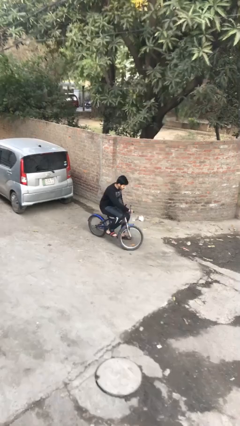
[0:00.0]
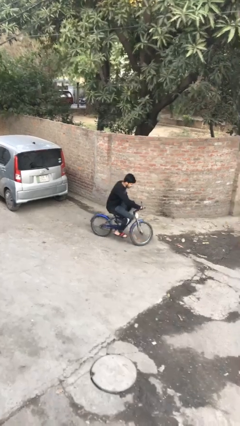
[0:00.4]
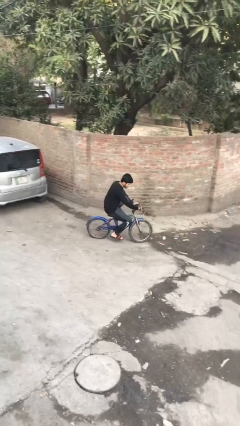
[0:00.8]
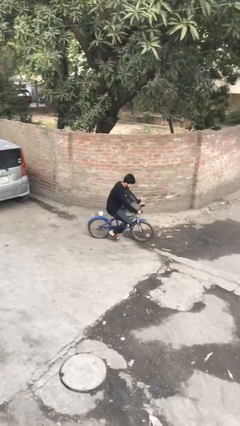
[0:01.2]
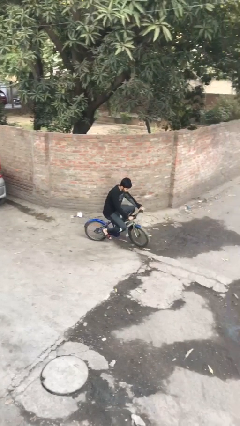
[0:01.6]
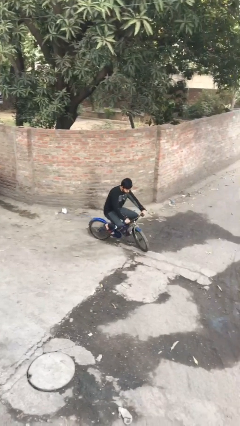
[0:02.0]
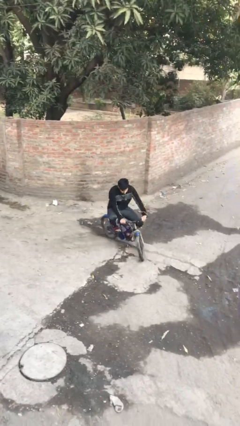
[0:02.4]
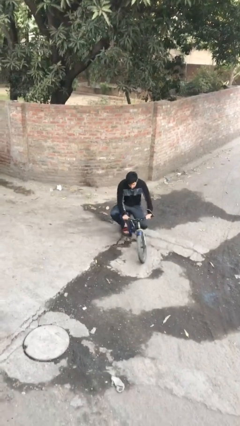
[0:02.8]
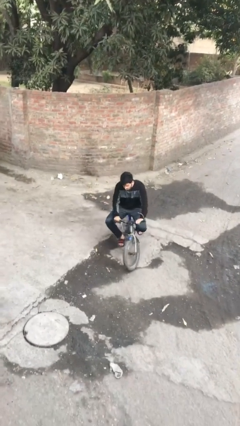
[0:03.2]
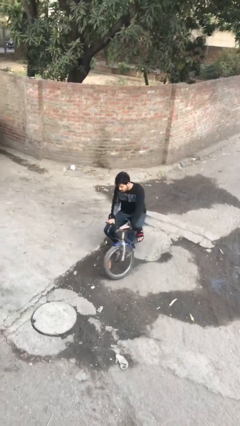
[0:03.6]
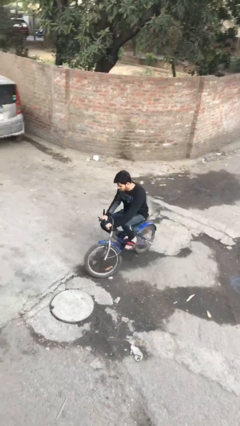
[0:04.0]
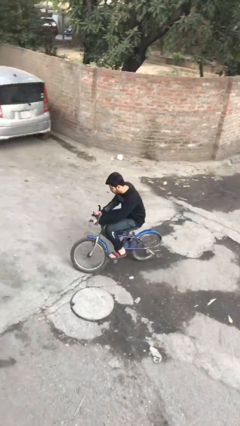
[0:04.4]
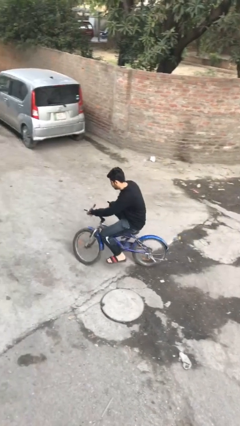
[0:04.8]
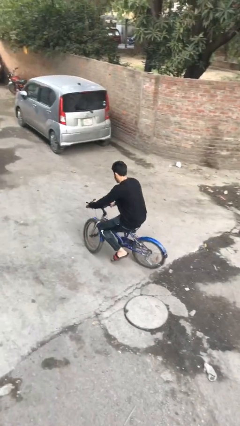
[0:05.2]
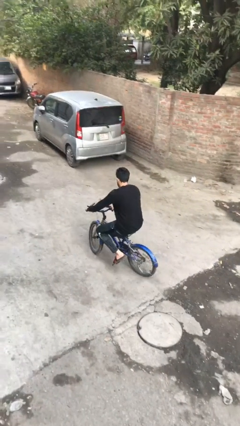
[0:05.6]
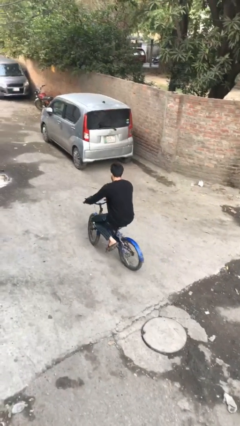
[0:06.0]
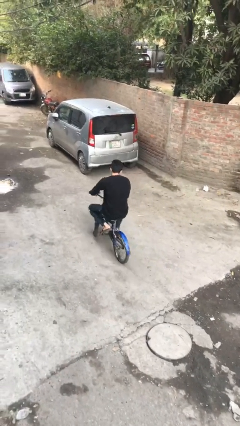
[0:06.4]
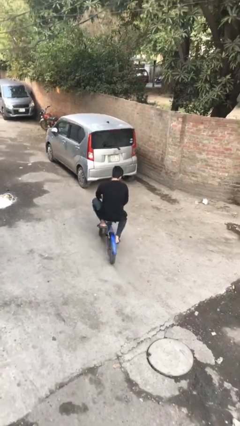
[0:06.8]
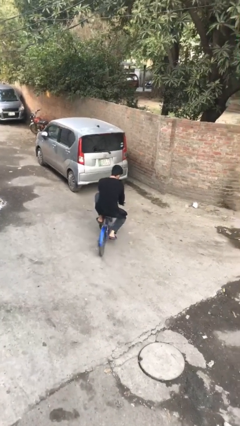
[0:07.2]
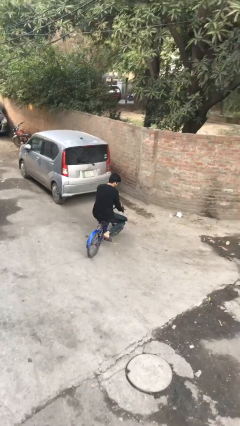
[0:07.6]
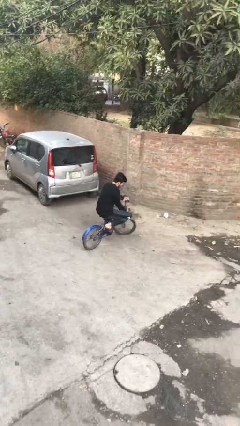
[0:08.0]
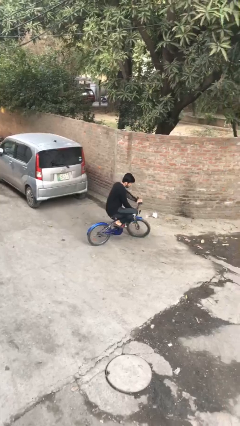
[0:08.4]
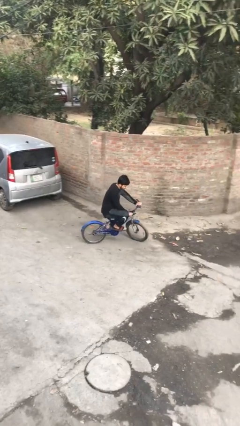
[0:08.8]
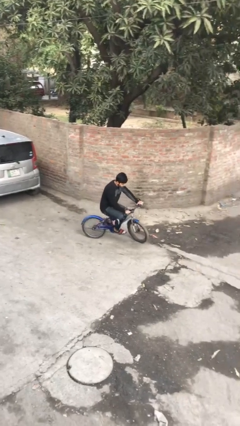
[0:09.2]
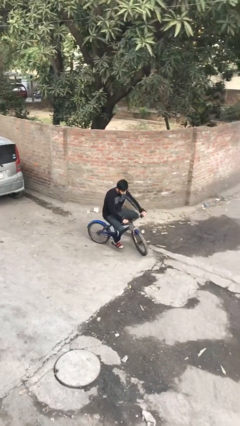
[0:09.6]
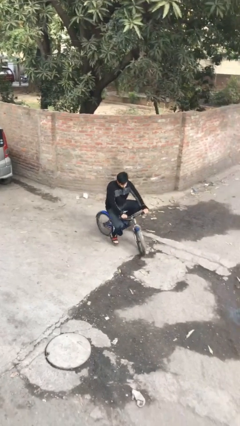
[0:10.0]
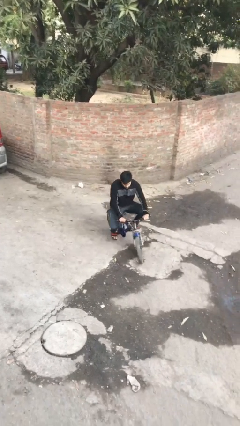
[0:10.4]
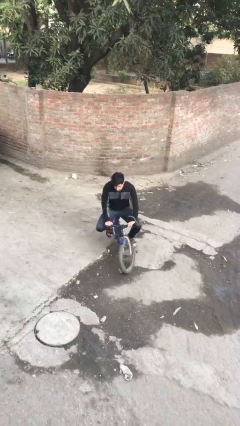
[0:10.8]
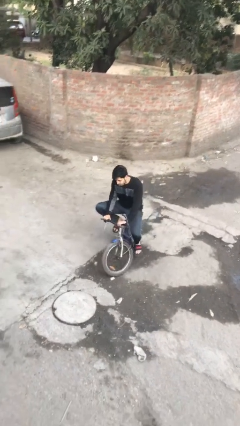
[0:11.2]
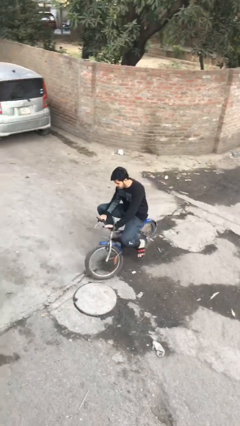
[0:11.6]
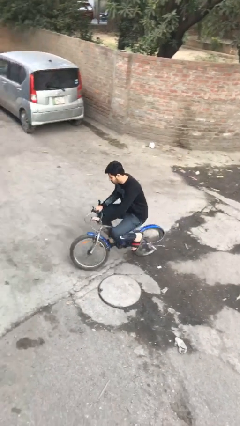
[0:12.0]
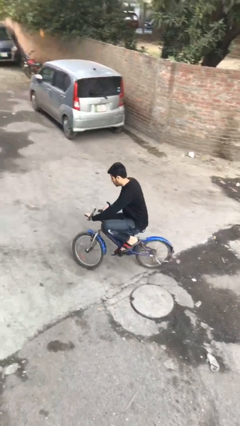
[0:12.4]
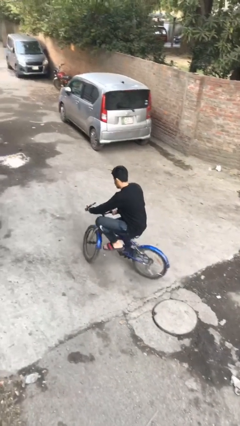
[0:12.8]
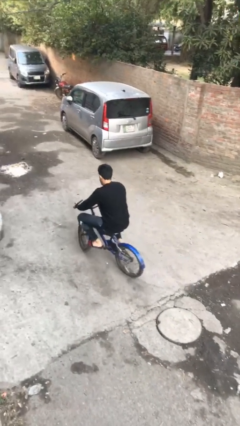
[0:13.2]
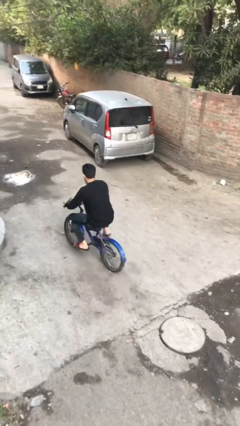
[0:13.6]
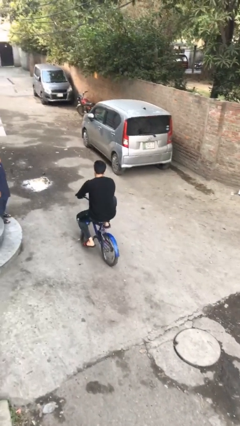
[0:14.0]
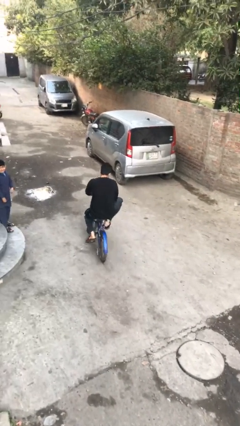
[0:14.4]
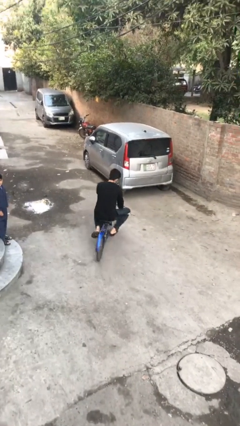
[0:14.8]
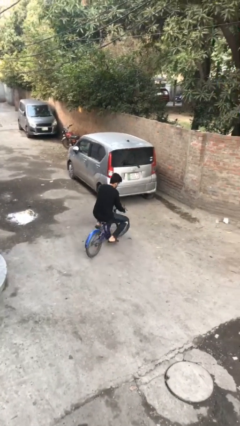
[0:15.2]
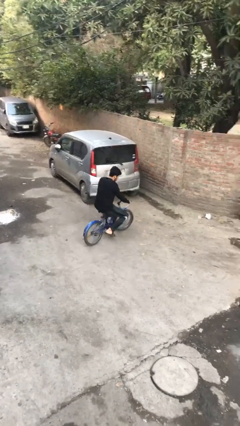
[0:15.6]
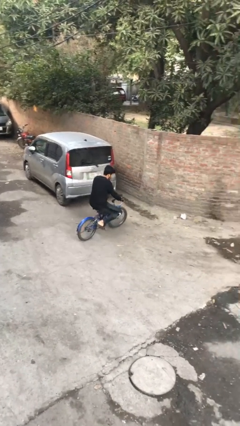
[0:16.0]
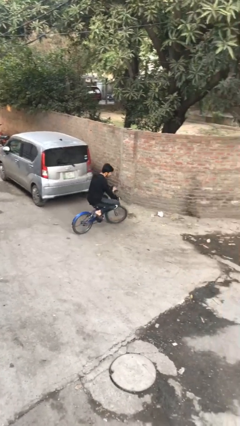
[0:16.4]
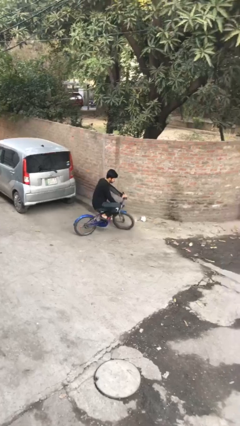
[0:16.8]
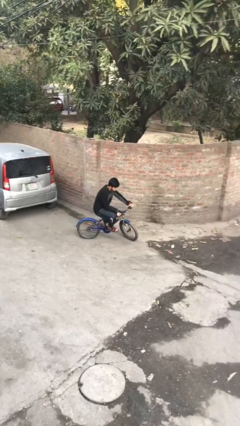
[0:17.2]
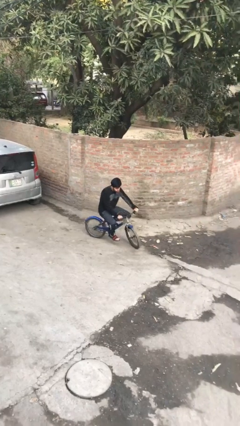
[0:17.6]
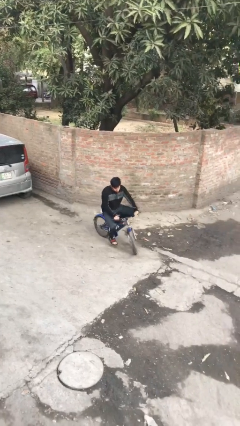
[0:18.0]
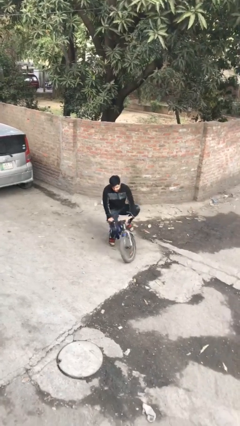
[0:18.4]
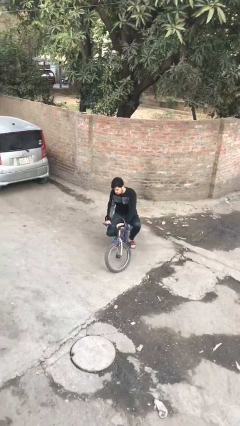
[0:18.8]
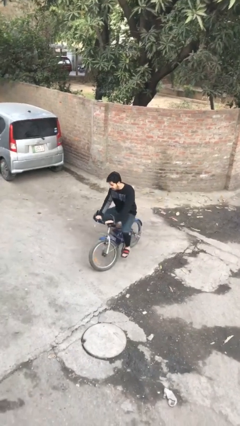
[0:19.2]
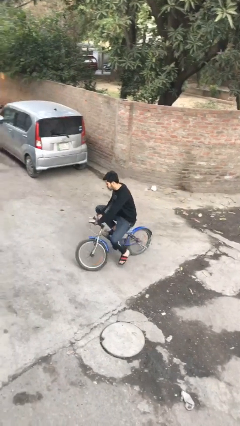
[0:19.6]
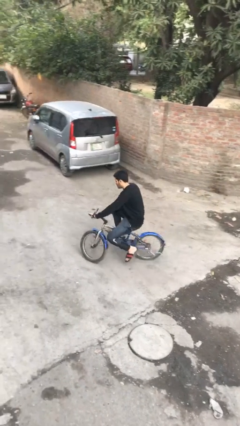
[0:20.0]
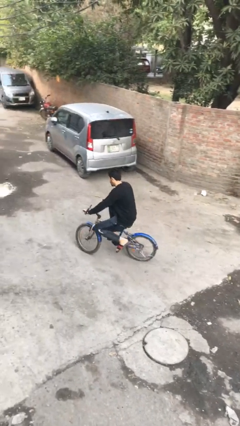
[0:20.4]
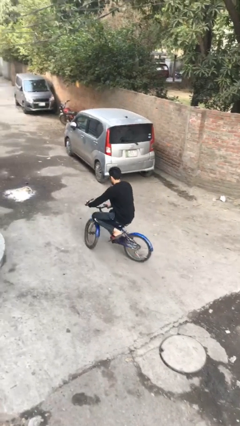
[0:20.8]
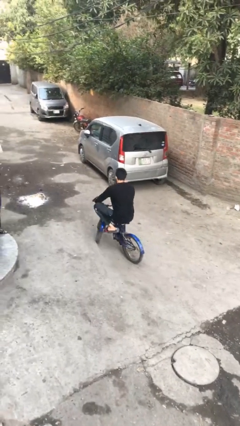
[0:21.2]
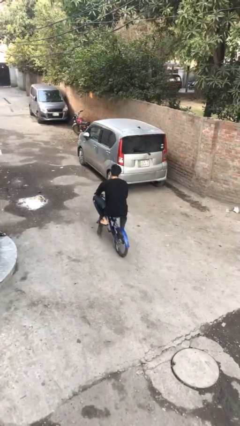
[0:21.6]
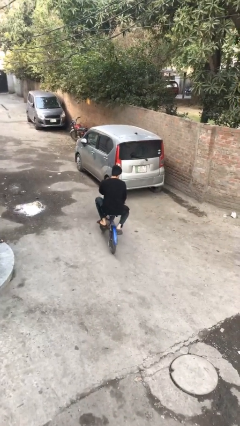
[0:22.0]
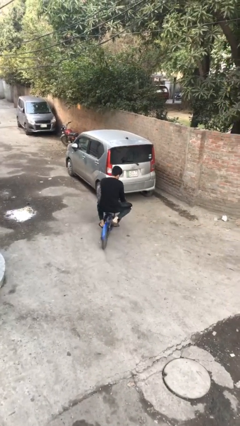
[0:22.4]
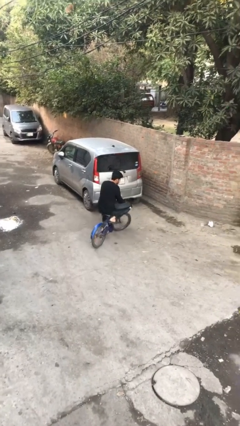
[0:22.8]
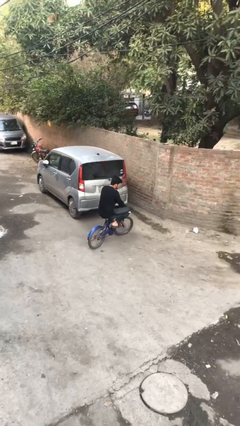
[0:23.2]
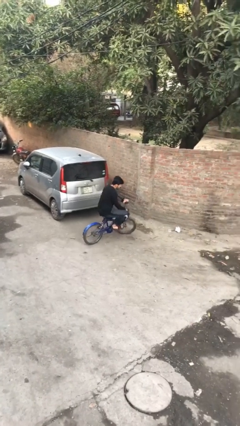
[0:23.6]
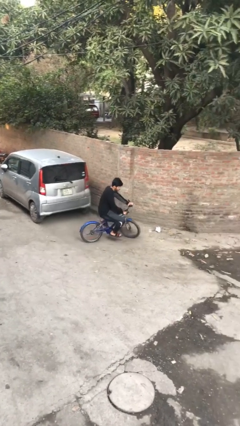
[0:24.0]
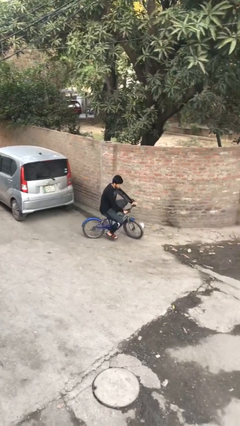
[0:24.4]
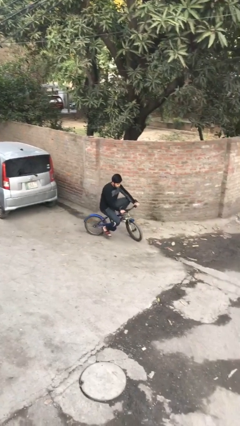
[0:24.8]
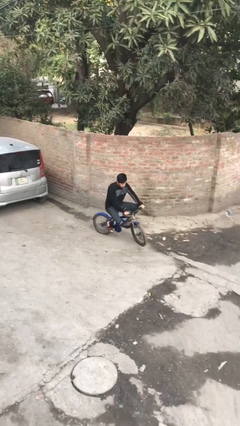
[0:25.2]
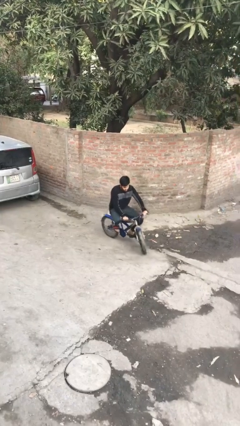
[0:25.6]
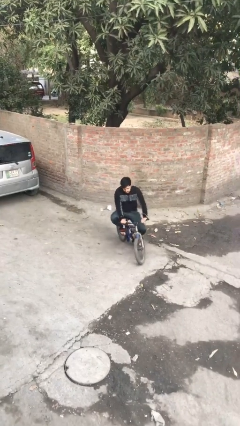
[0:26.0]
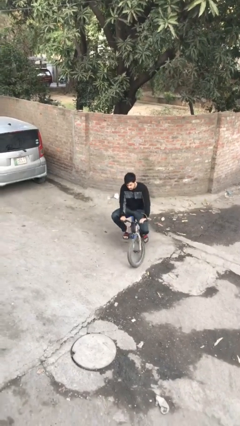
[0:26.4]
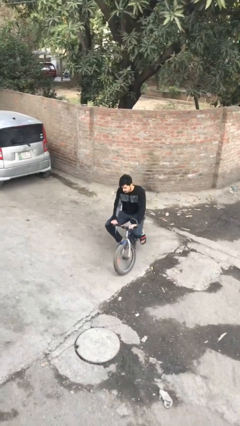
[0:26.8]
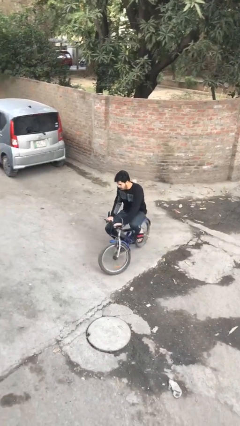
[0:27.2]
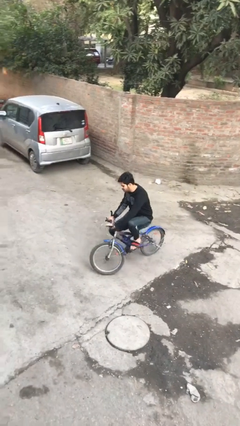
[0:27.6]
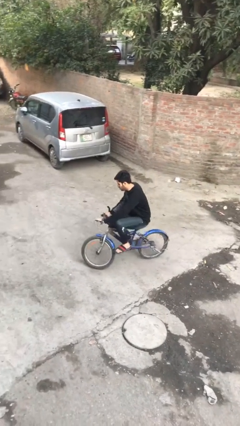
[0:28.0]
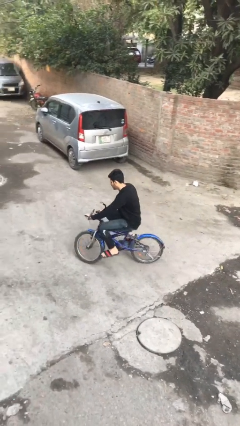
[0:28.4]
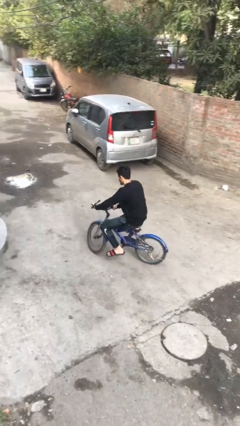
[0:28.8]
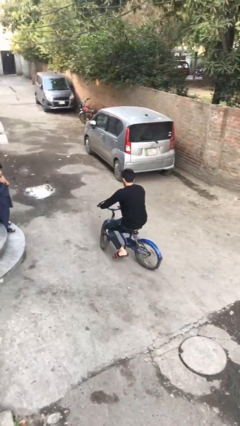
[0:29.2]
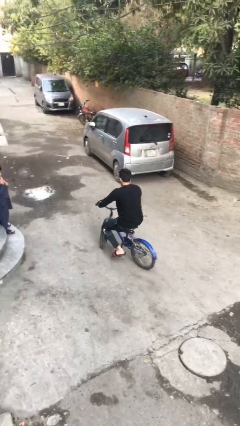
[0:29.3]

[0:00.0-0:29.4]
person rides bicycle

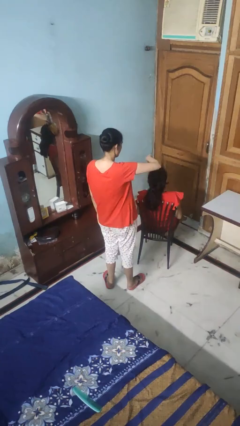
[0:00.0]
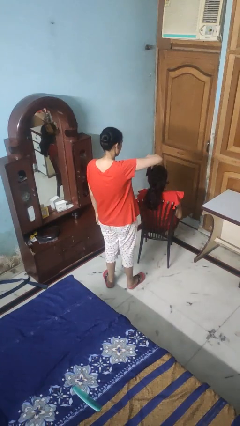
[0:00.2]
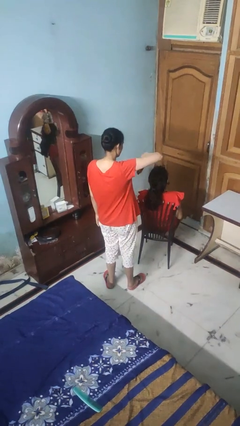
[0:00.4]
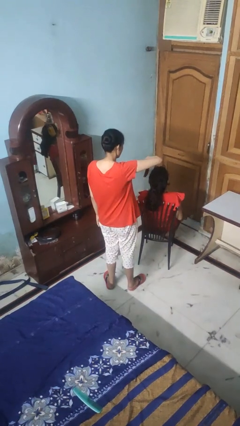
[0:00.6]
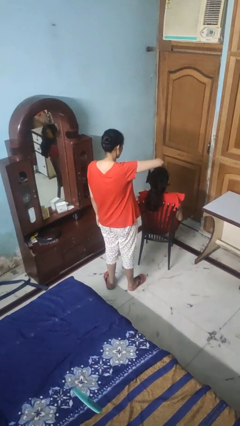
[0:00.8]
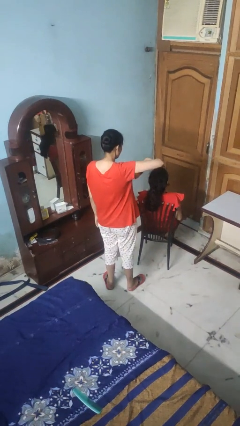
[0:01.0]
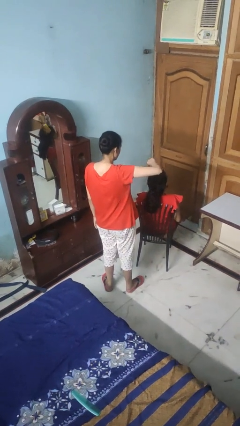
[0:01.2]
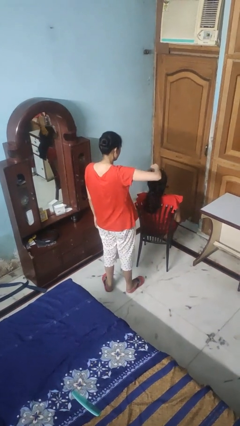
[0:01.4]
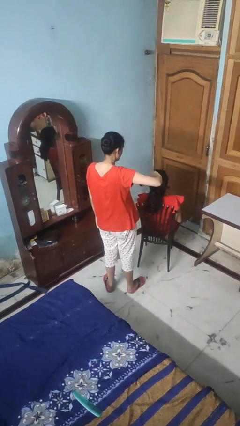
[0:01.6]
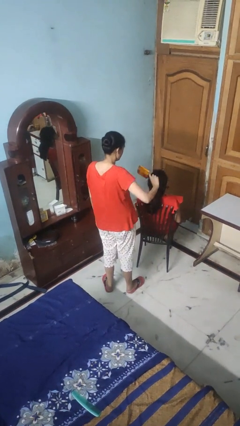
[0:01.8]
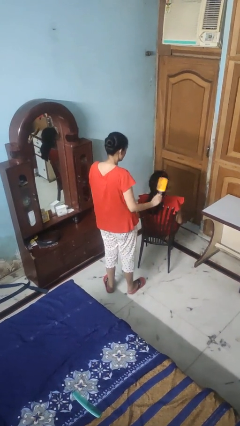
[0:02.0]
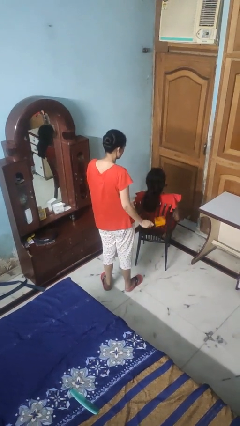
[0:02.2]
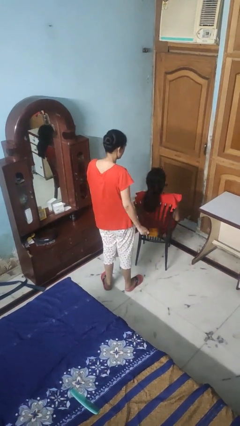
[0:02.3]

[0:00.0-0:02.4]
person brushes hair of person

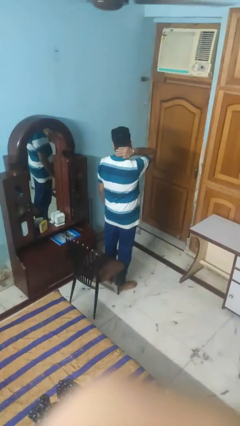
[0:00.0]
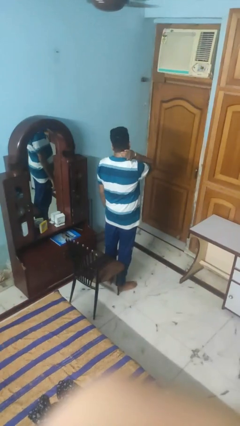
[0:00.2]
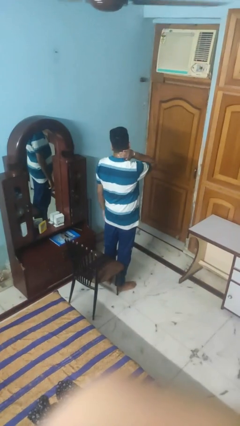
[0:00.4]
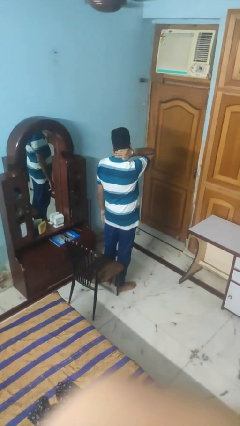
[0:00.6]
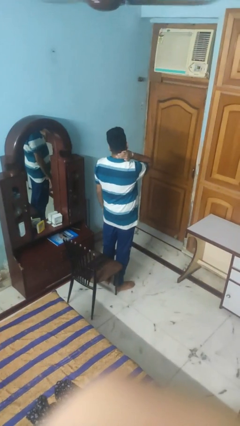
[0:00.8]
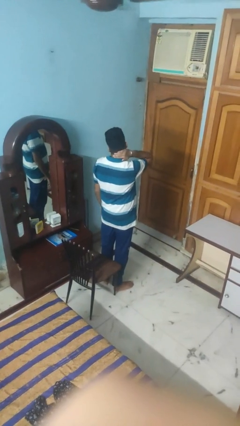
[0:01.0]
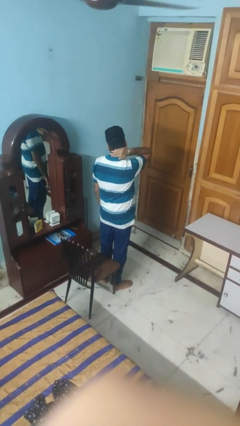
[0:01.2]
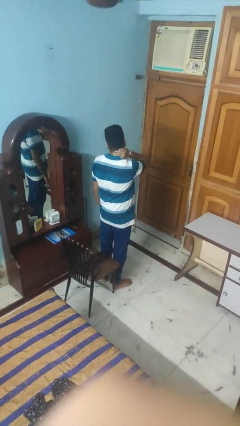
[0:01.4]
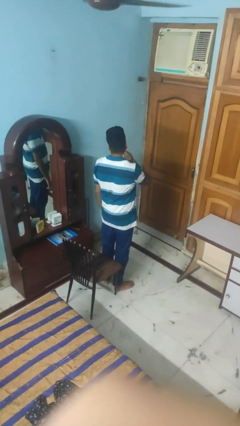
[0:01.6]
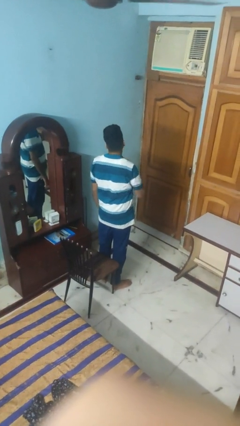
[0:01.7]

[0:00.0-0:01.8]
person rubs neck
